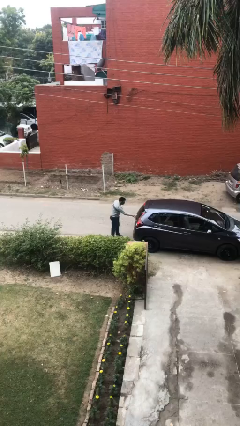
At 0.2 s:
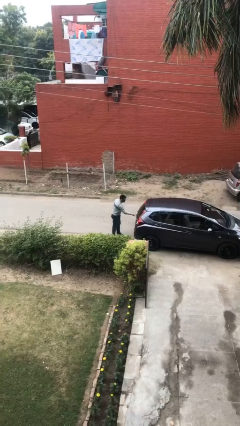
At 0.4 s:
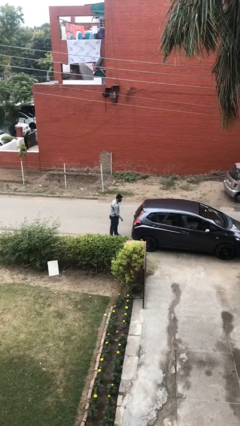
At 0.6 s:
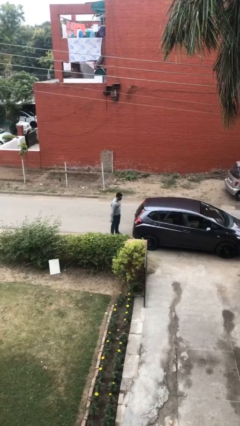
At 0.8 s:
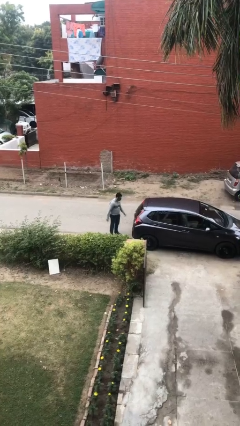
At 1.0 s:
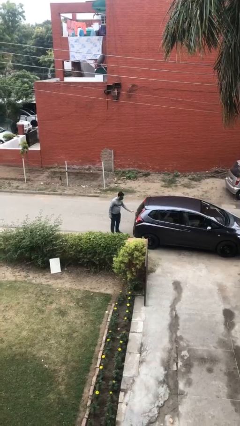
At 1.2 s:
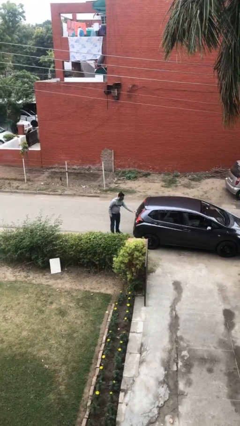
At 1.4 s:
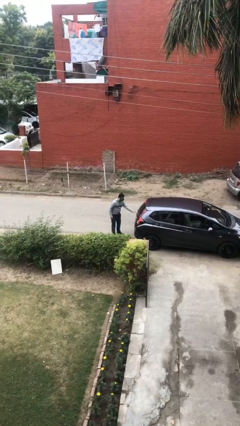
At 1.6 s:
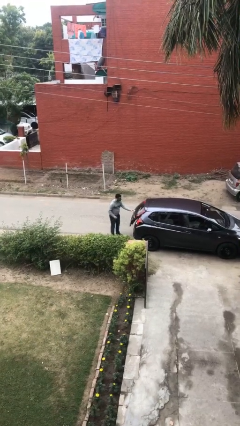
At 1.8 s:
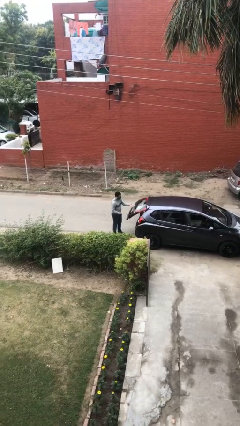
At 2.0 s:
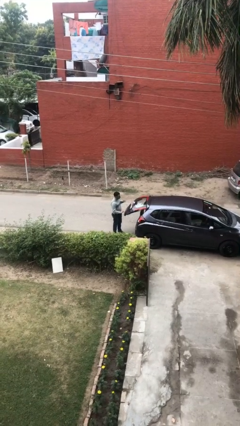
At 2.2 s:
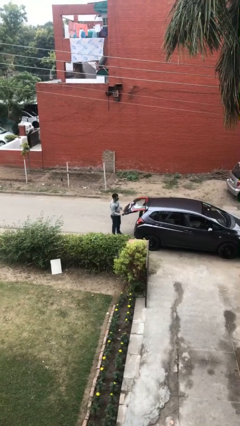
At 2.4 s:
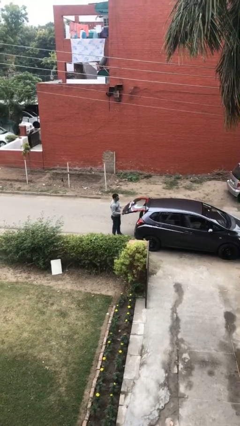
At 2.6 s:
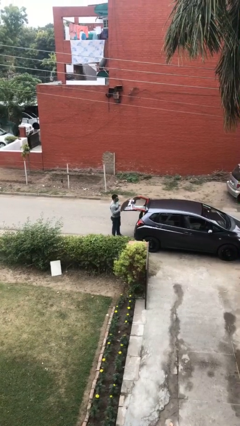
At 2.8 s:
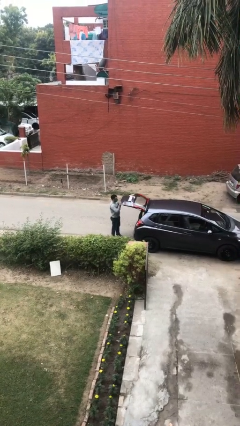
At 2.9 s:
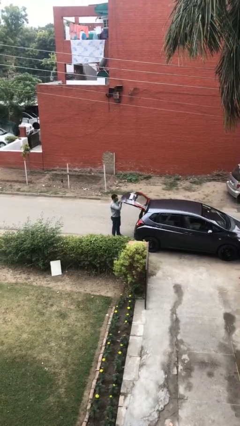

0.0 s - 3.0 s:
person opens car trunk

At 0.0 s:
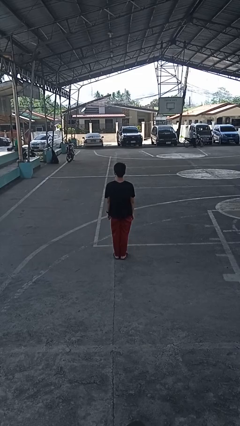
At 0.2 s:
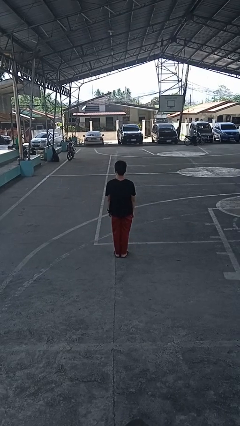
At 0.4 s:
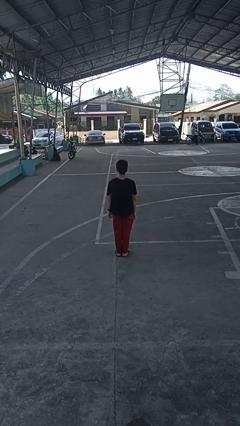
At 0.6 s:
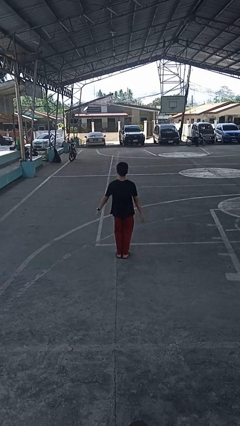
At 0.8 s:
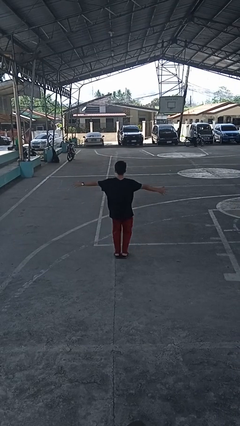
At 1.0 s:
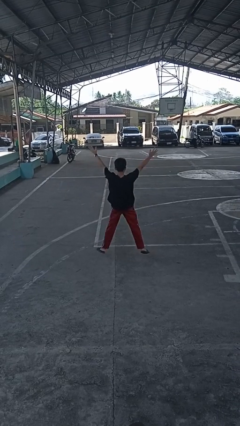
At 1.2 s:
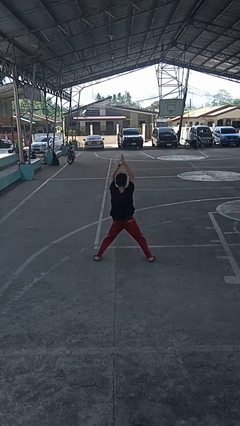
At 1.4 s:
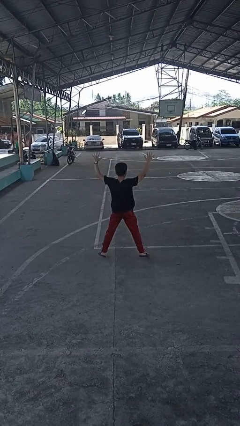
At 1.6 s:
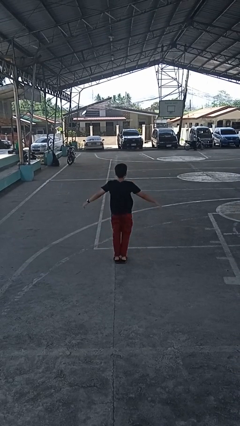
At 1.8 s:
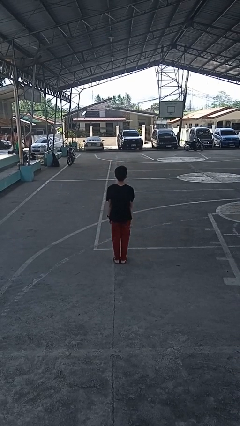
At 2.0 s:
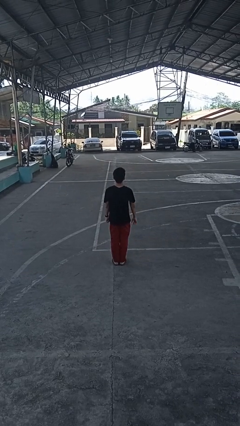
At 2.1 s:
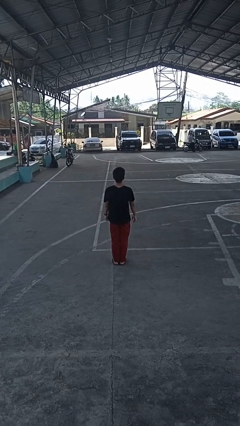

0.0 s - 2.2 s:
person exercises with jumping jacks

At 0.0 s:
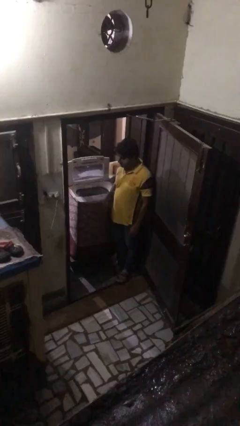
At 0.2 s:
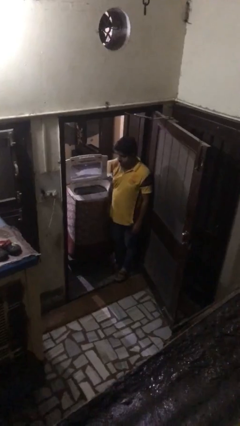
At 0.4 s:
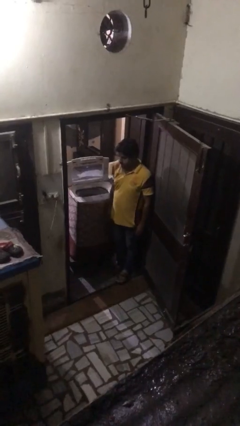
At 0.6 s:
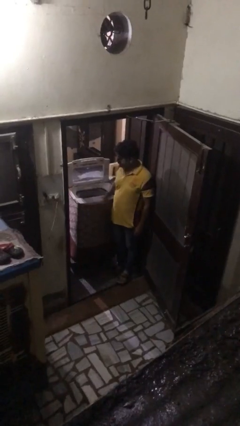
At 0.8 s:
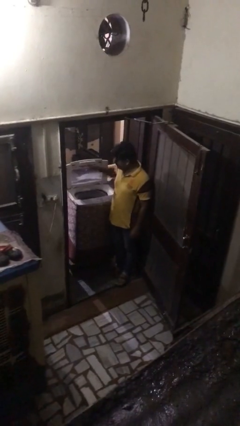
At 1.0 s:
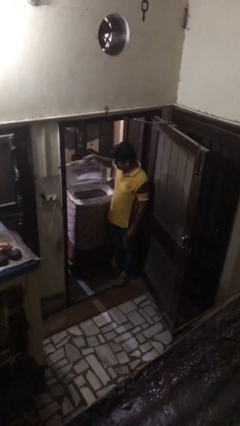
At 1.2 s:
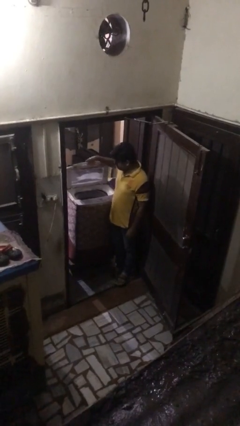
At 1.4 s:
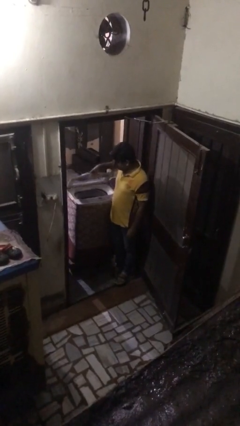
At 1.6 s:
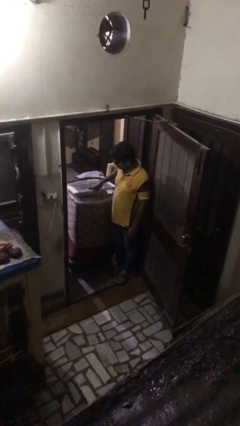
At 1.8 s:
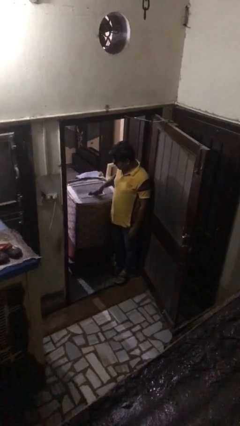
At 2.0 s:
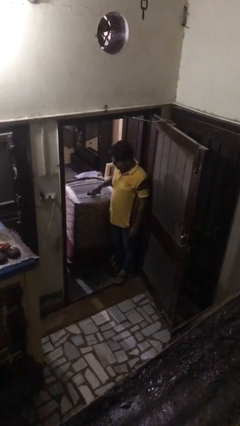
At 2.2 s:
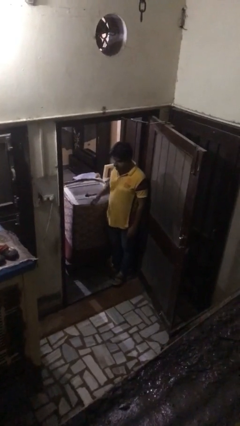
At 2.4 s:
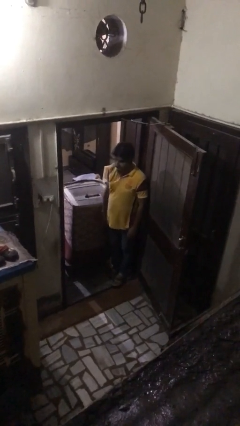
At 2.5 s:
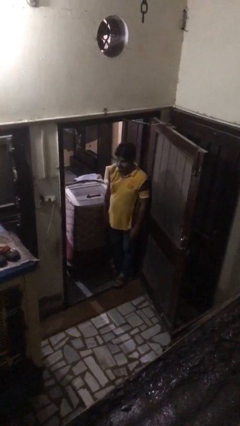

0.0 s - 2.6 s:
person closes clothes washer

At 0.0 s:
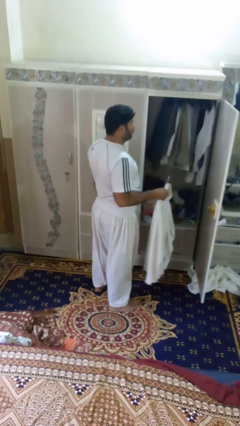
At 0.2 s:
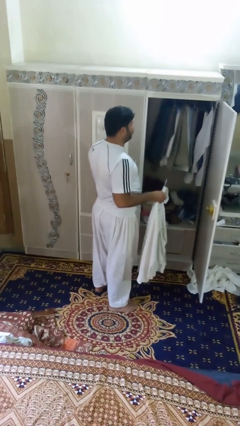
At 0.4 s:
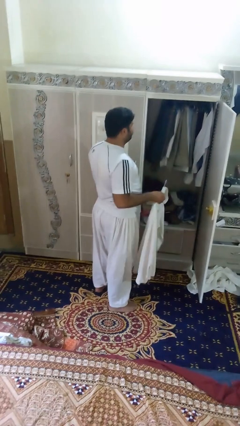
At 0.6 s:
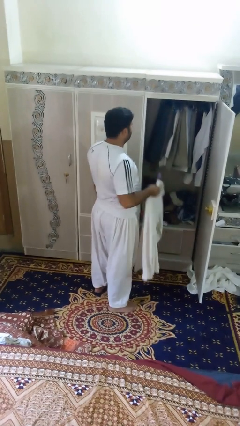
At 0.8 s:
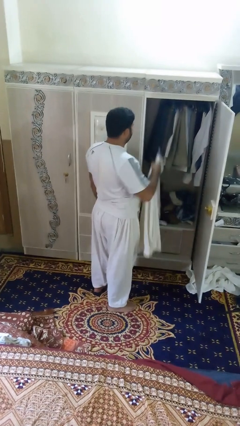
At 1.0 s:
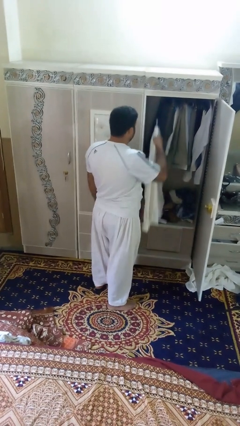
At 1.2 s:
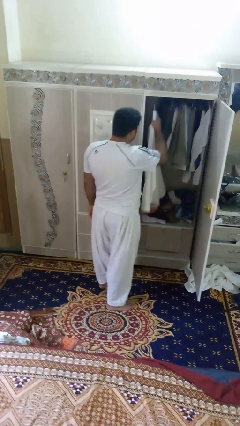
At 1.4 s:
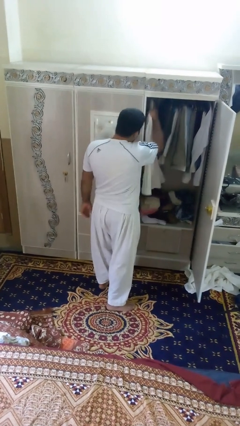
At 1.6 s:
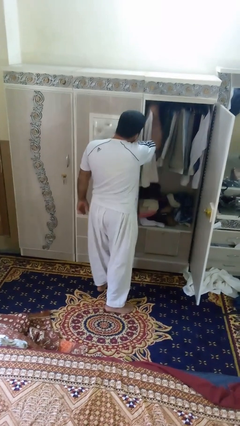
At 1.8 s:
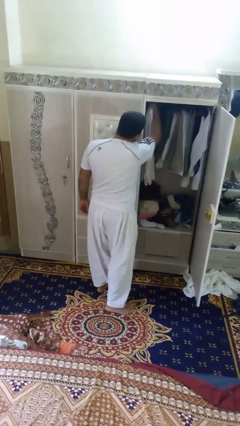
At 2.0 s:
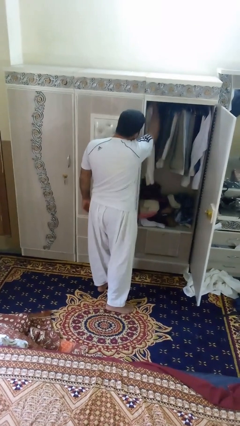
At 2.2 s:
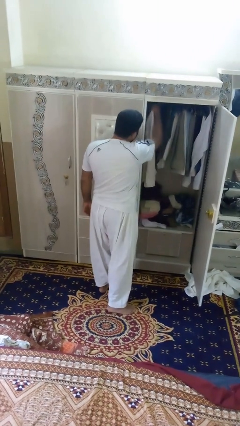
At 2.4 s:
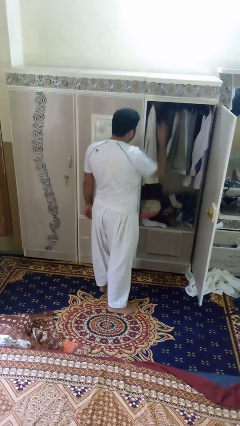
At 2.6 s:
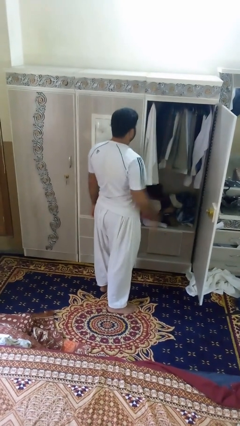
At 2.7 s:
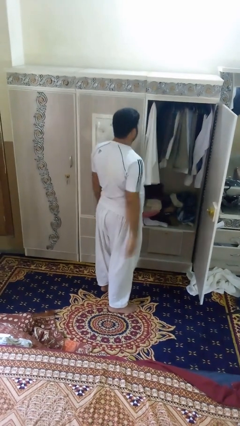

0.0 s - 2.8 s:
person puts clothes into closet

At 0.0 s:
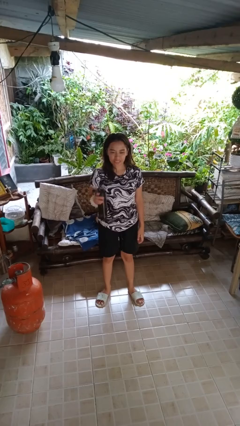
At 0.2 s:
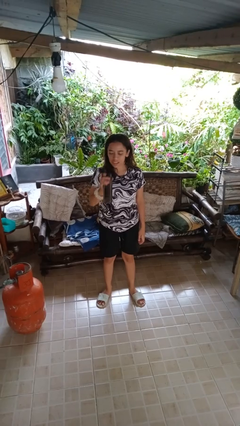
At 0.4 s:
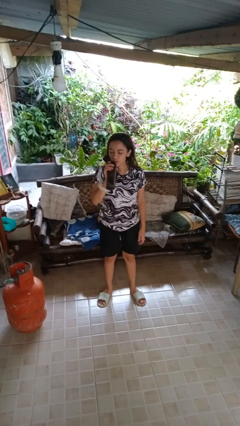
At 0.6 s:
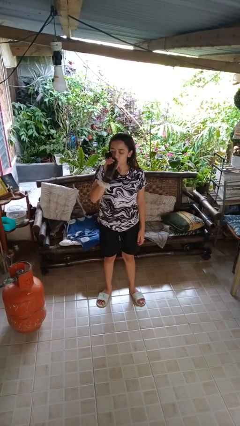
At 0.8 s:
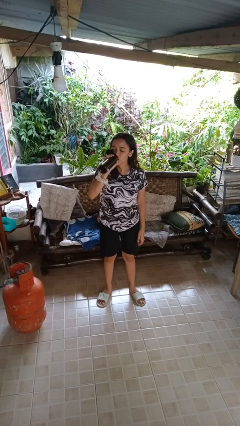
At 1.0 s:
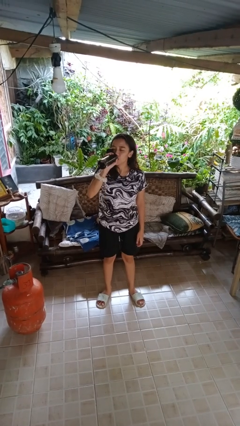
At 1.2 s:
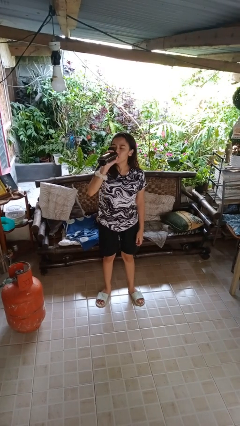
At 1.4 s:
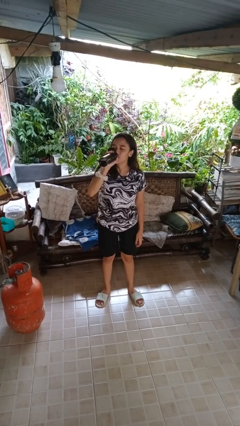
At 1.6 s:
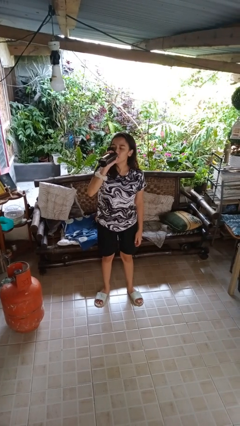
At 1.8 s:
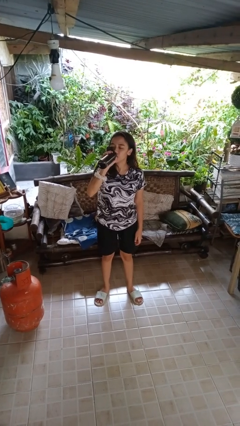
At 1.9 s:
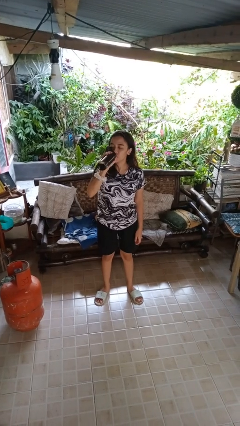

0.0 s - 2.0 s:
person drinks from bottle

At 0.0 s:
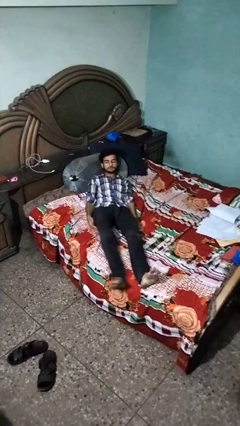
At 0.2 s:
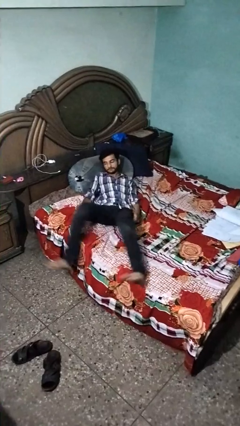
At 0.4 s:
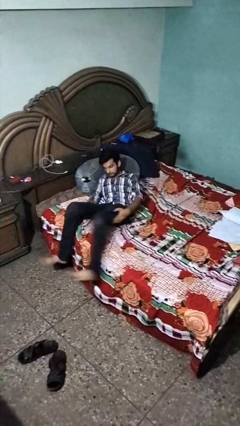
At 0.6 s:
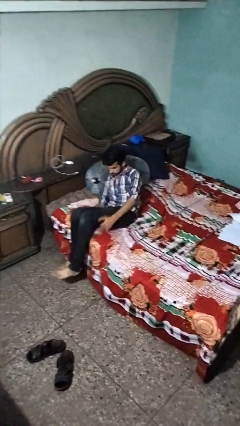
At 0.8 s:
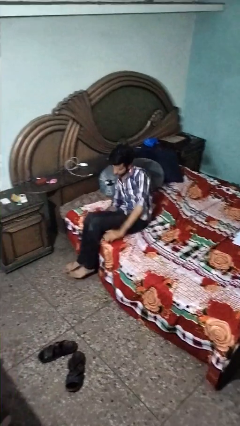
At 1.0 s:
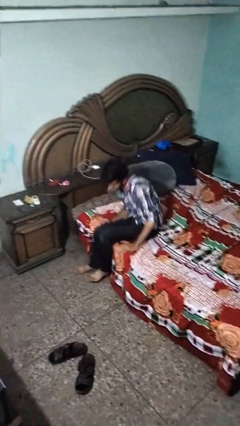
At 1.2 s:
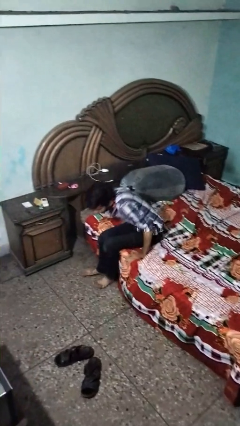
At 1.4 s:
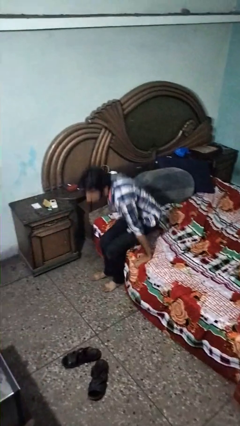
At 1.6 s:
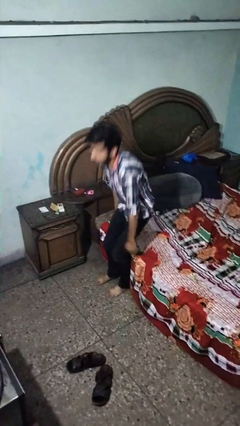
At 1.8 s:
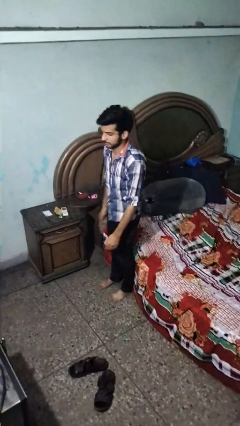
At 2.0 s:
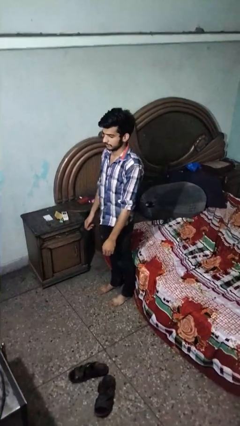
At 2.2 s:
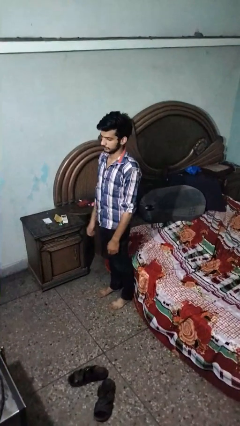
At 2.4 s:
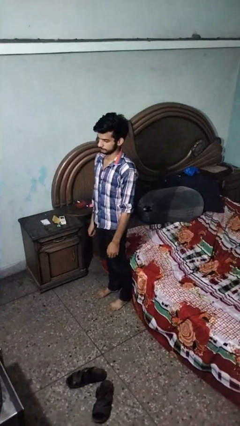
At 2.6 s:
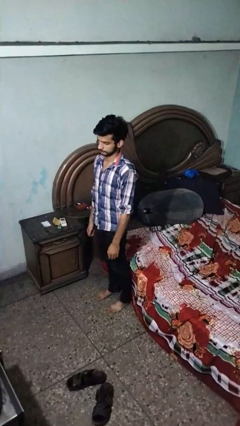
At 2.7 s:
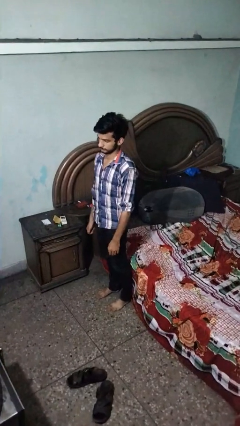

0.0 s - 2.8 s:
person stands up

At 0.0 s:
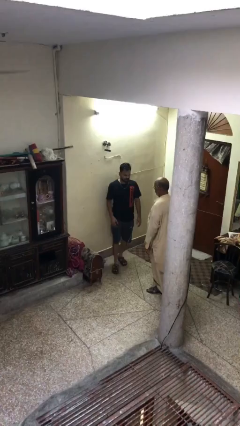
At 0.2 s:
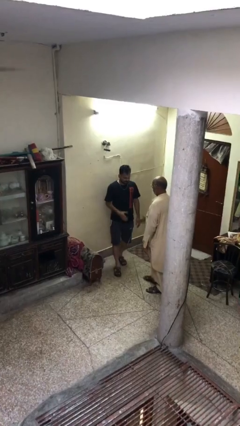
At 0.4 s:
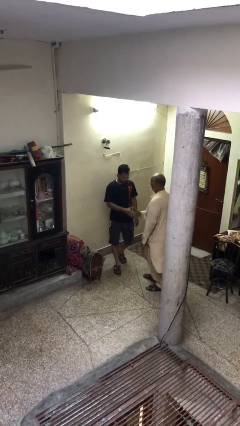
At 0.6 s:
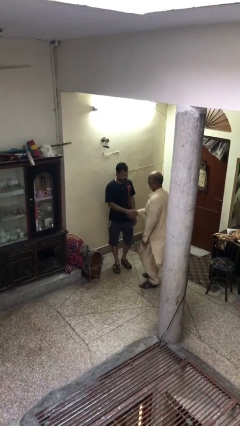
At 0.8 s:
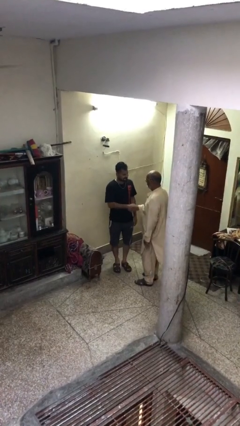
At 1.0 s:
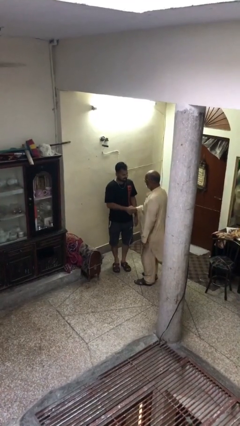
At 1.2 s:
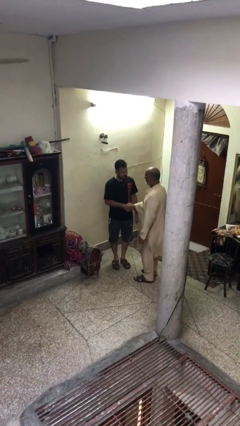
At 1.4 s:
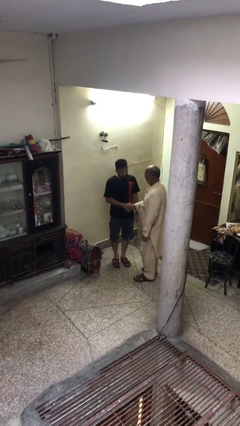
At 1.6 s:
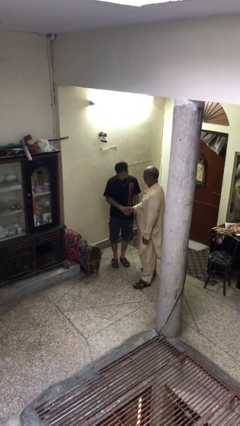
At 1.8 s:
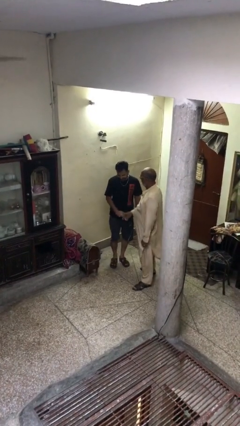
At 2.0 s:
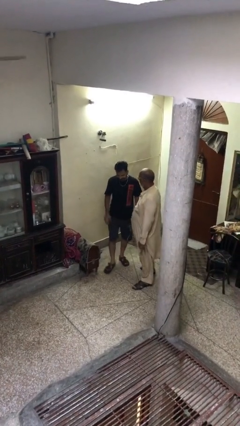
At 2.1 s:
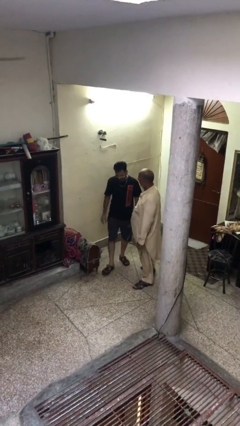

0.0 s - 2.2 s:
person shakes hand
